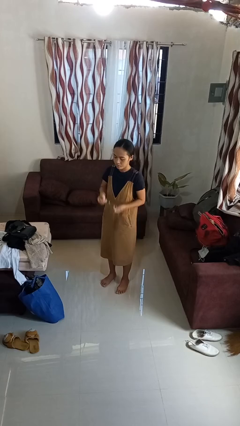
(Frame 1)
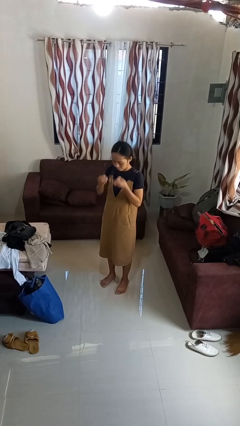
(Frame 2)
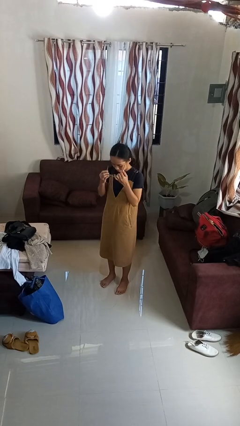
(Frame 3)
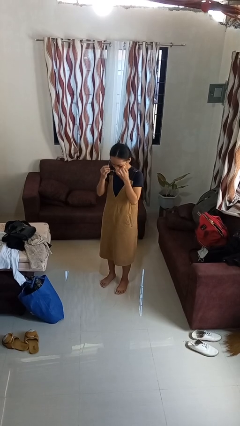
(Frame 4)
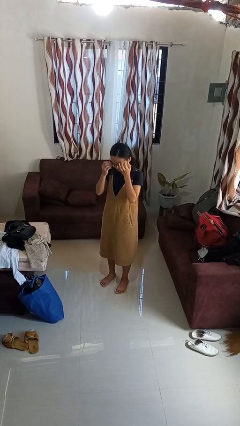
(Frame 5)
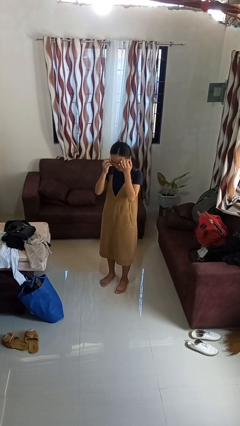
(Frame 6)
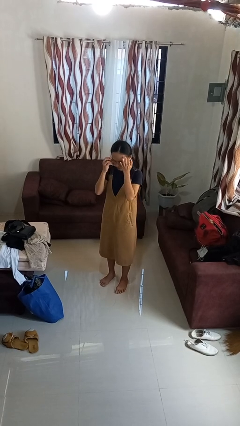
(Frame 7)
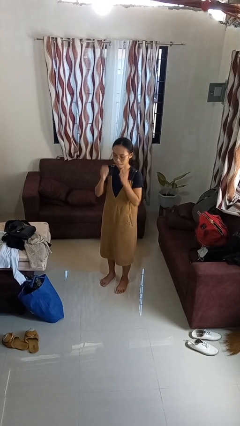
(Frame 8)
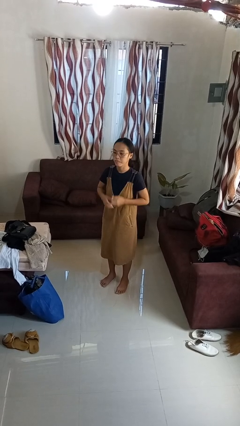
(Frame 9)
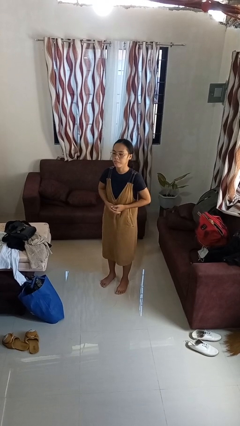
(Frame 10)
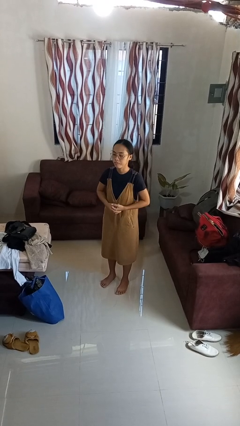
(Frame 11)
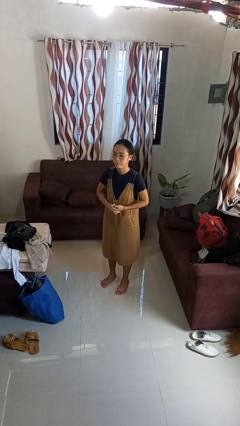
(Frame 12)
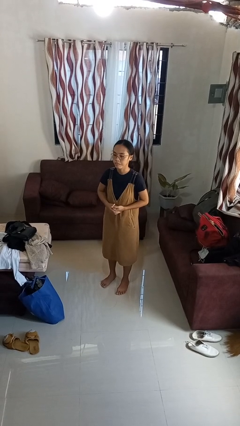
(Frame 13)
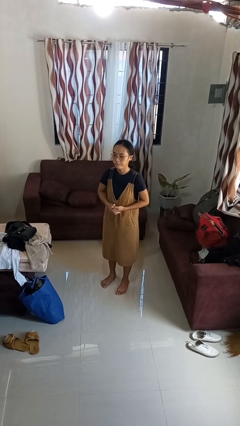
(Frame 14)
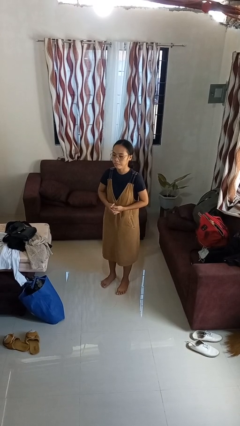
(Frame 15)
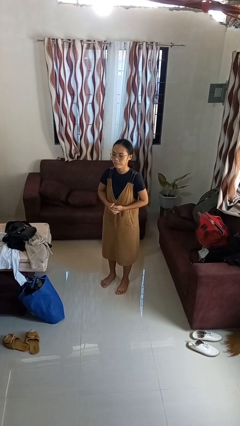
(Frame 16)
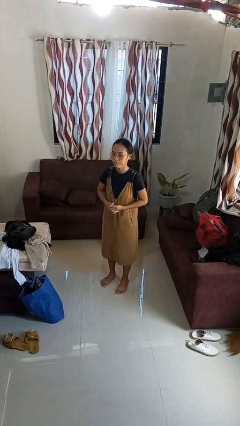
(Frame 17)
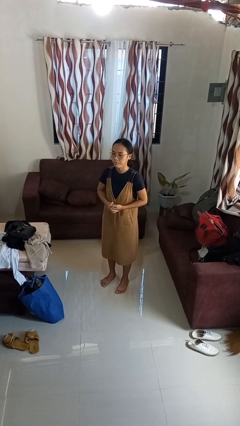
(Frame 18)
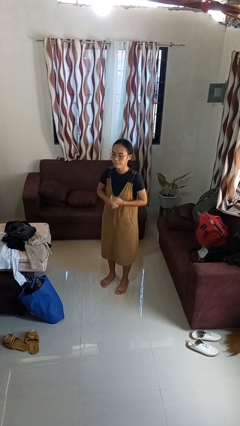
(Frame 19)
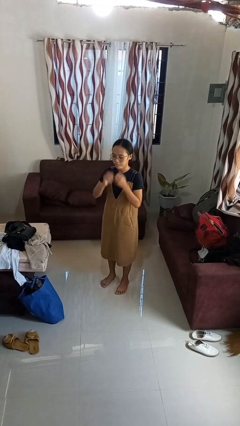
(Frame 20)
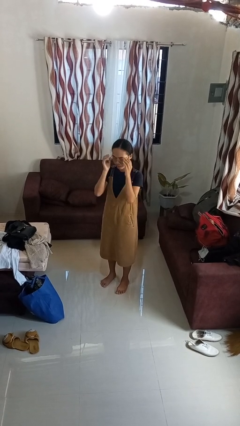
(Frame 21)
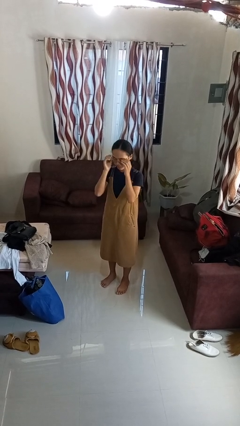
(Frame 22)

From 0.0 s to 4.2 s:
person puts on glasses

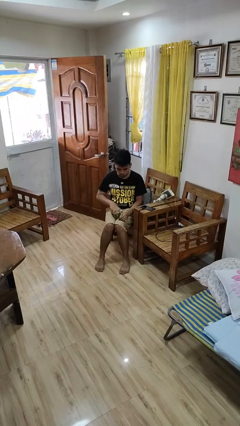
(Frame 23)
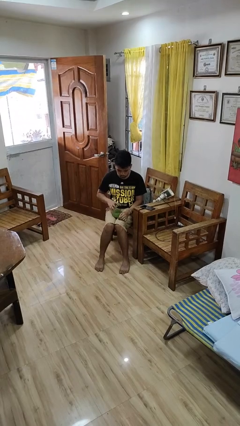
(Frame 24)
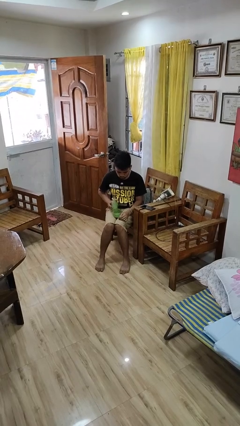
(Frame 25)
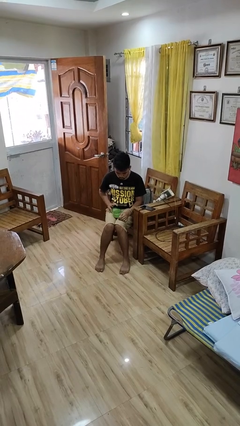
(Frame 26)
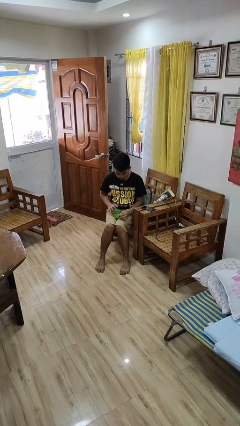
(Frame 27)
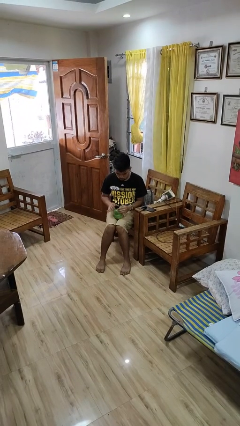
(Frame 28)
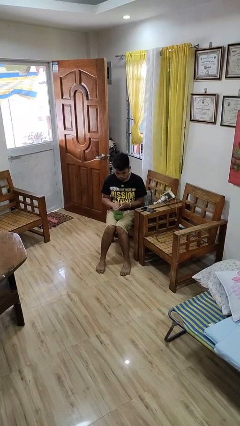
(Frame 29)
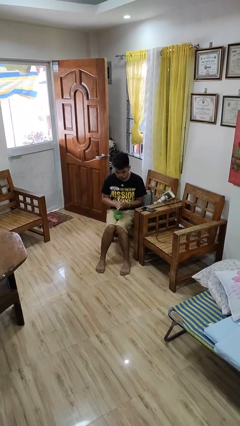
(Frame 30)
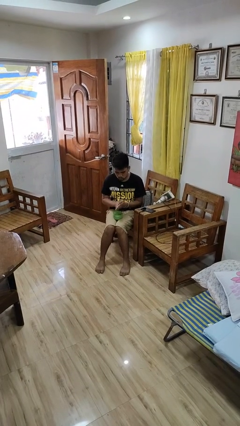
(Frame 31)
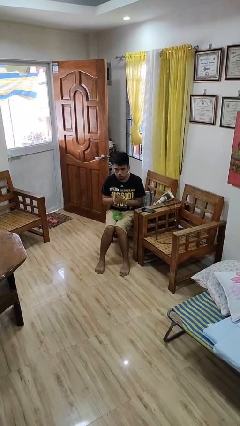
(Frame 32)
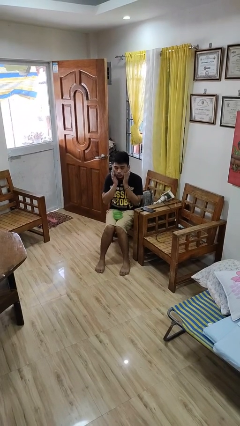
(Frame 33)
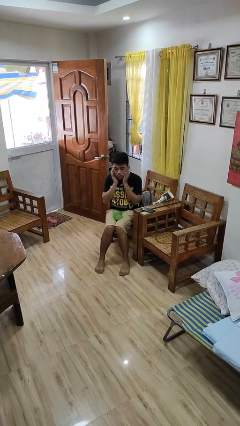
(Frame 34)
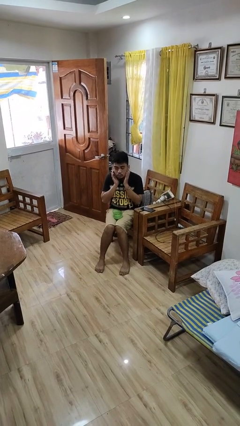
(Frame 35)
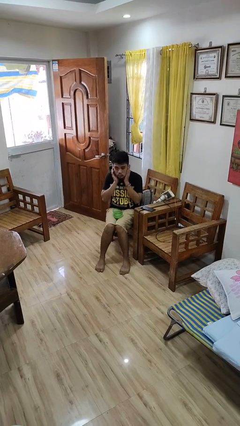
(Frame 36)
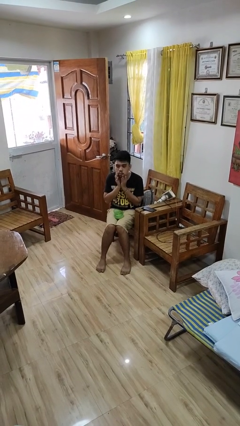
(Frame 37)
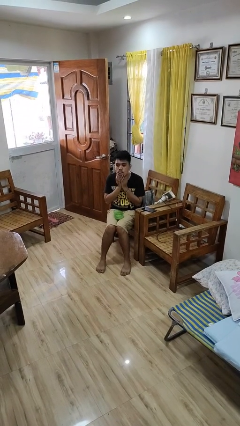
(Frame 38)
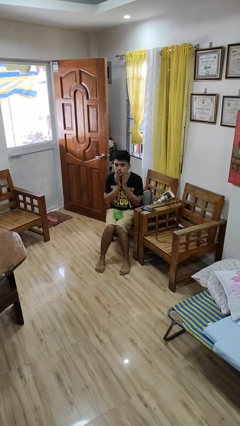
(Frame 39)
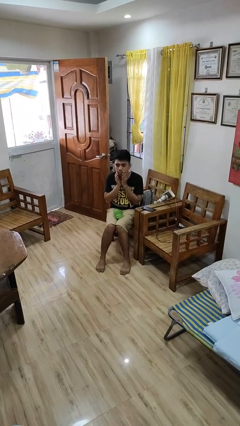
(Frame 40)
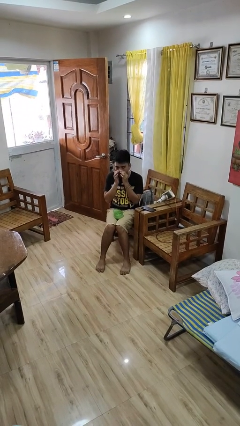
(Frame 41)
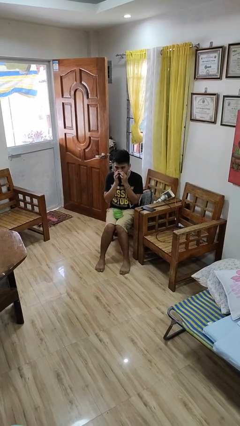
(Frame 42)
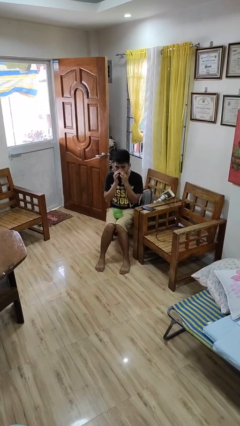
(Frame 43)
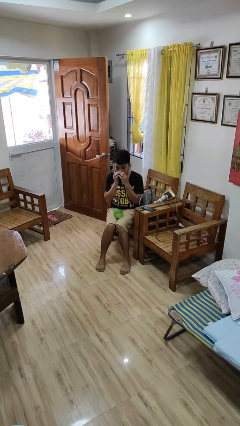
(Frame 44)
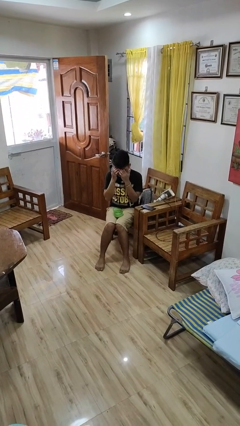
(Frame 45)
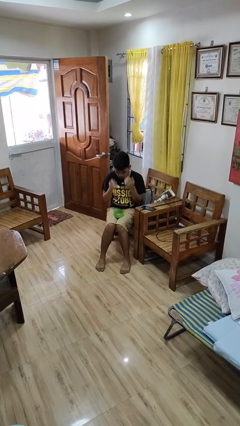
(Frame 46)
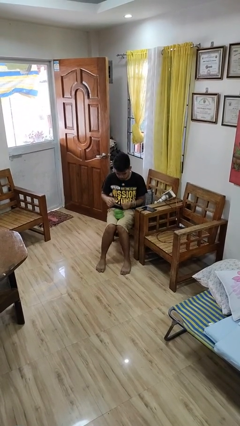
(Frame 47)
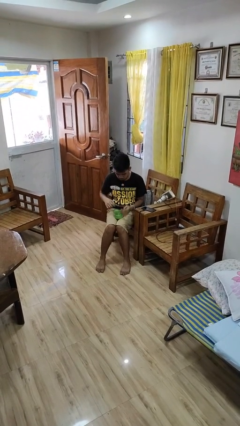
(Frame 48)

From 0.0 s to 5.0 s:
person applies facial moisturizer

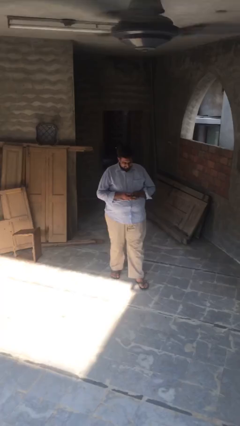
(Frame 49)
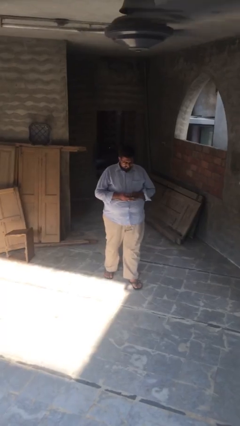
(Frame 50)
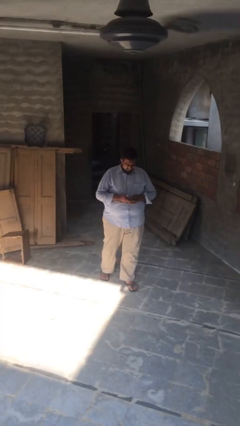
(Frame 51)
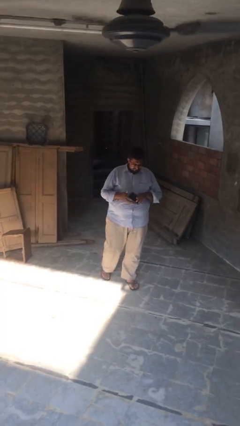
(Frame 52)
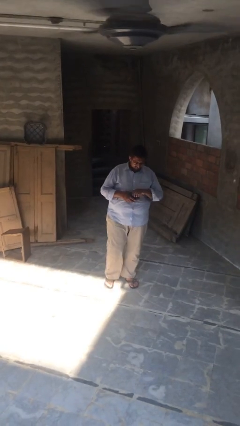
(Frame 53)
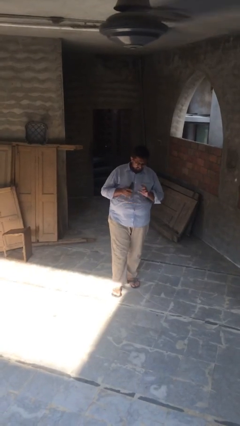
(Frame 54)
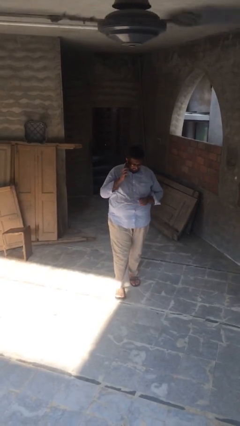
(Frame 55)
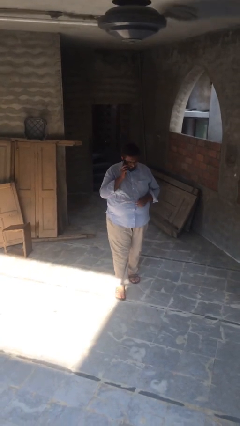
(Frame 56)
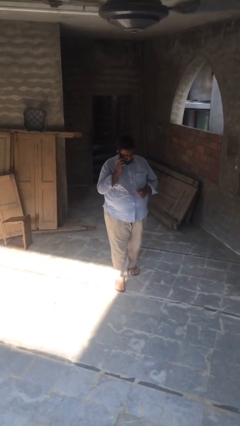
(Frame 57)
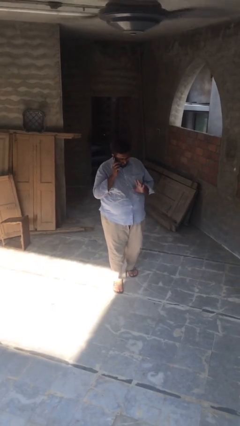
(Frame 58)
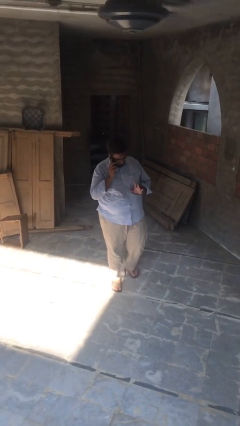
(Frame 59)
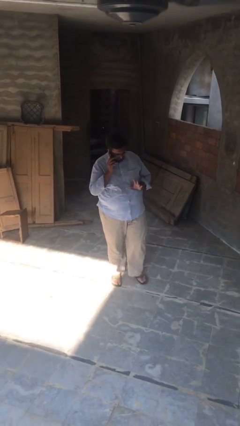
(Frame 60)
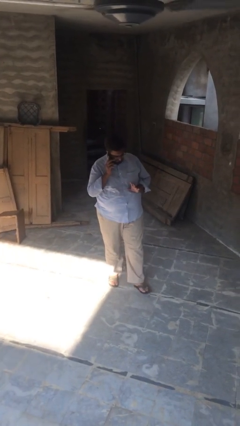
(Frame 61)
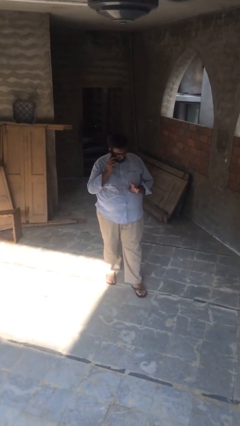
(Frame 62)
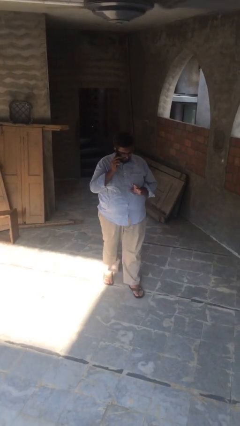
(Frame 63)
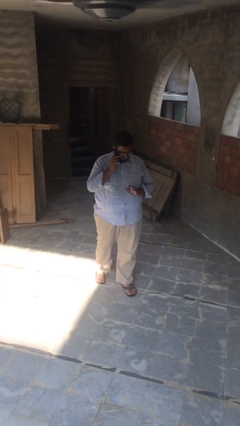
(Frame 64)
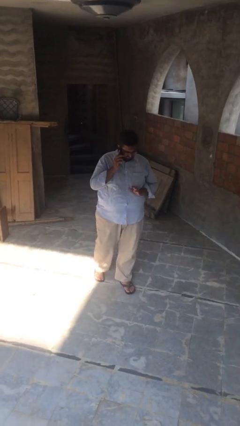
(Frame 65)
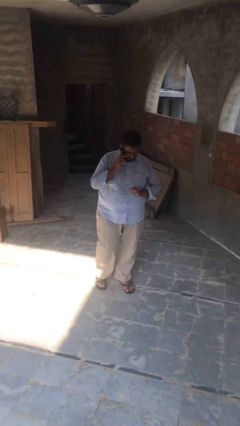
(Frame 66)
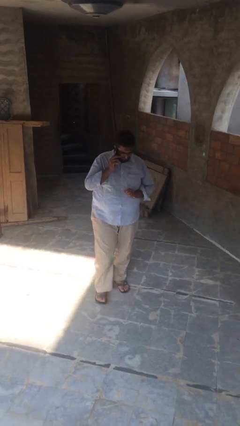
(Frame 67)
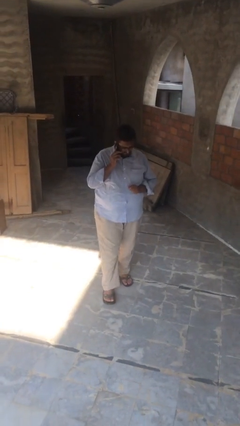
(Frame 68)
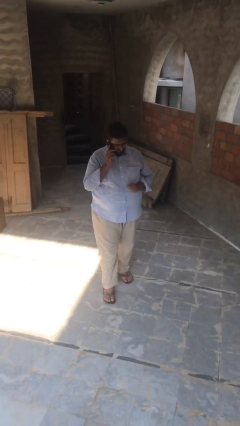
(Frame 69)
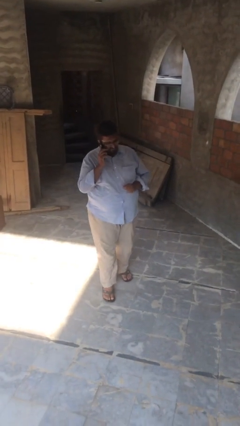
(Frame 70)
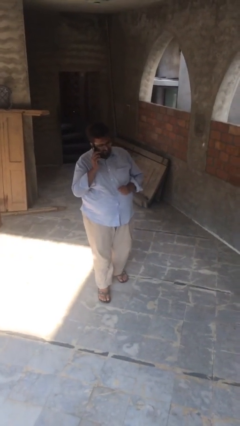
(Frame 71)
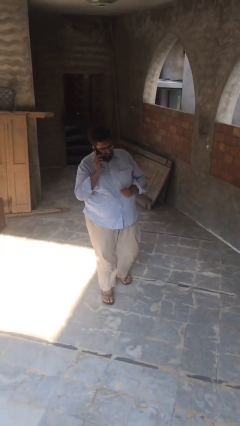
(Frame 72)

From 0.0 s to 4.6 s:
person talks on phone

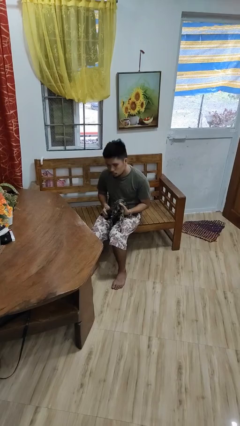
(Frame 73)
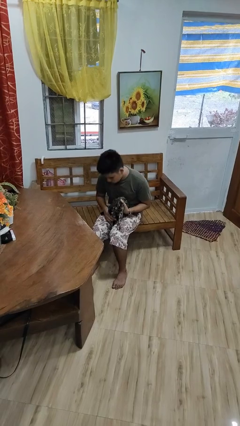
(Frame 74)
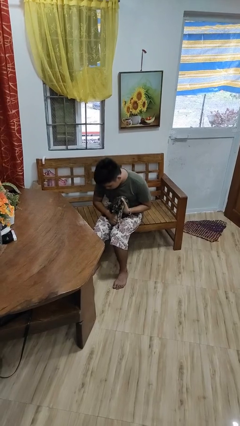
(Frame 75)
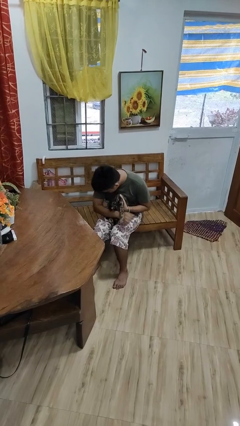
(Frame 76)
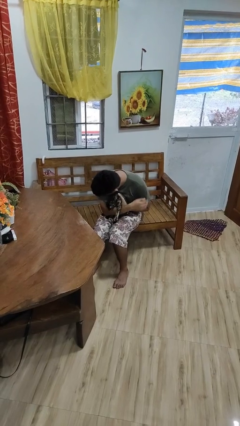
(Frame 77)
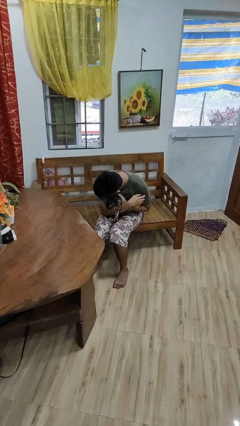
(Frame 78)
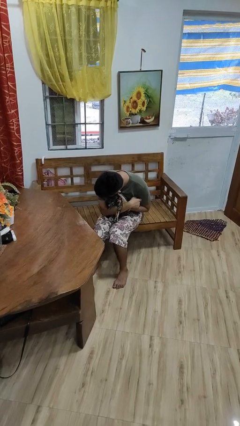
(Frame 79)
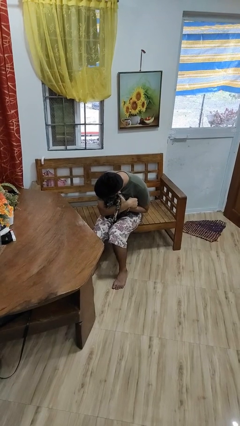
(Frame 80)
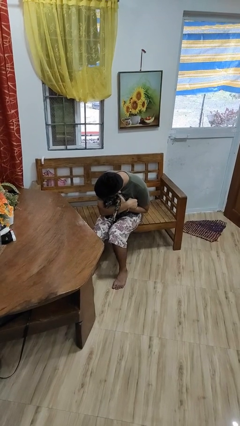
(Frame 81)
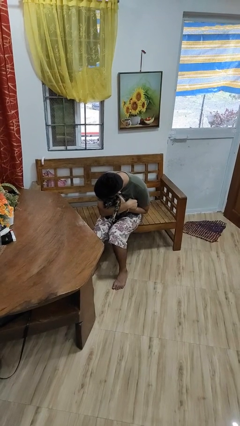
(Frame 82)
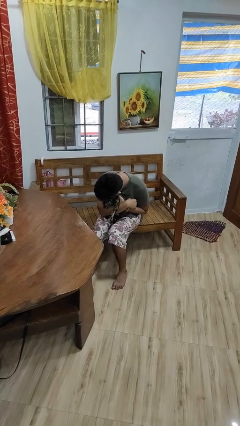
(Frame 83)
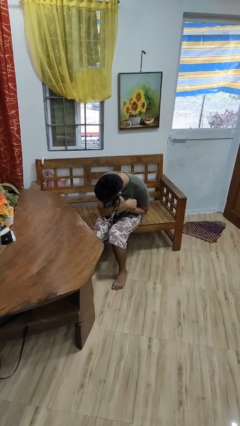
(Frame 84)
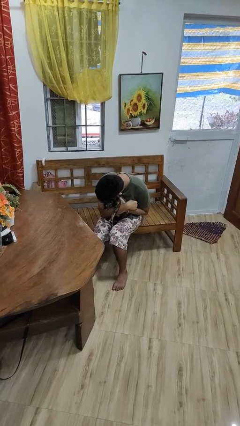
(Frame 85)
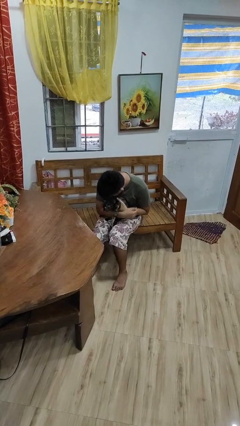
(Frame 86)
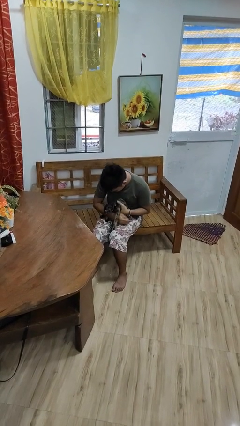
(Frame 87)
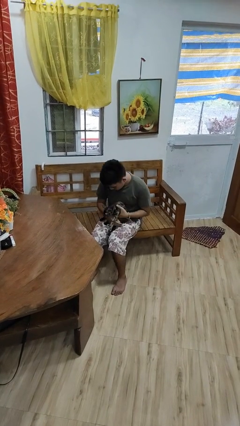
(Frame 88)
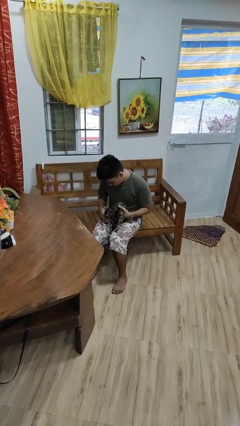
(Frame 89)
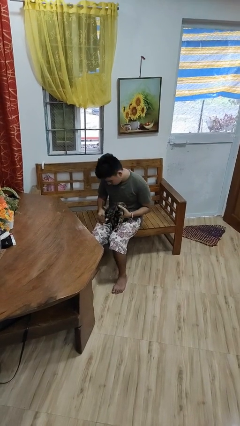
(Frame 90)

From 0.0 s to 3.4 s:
person hugs cat

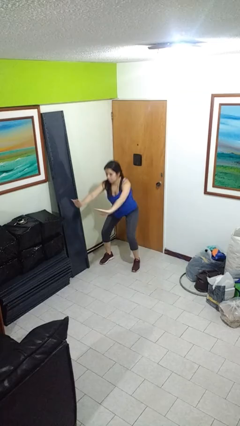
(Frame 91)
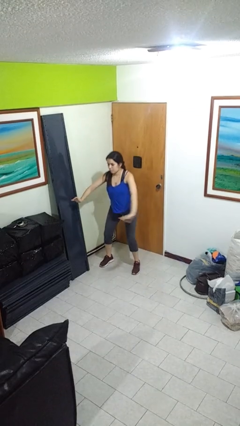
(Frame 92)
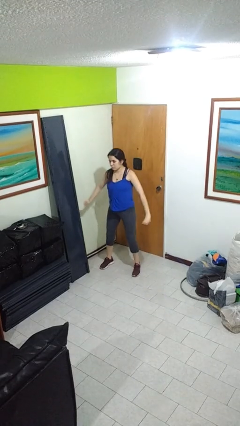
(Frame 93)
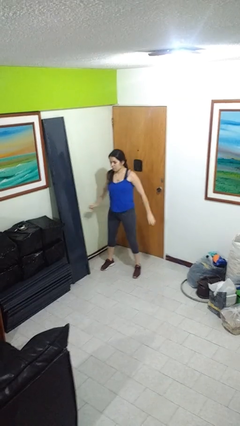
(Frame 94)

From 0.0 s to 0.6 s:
person stands up
